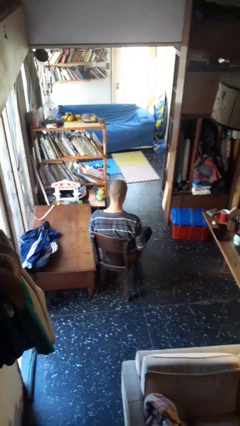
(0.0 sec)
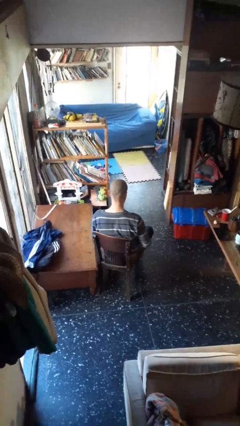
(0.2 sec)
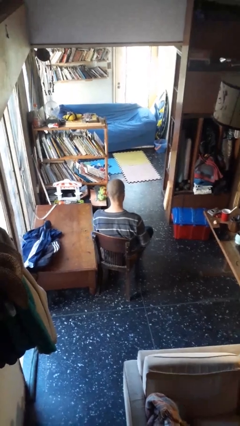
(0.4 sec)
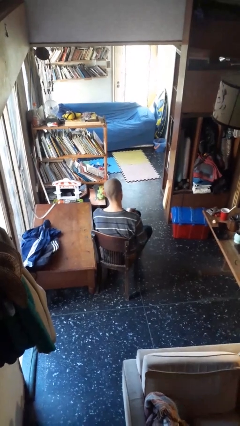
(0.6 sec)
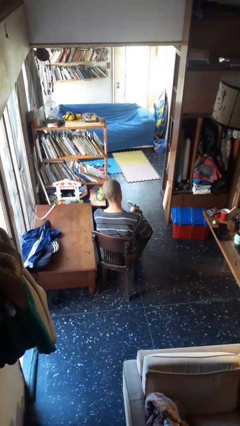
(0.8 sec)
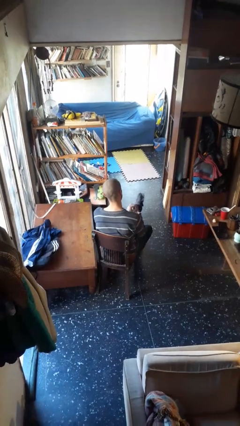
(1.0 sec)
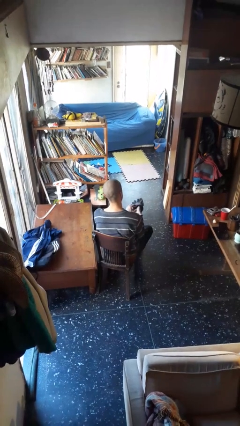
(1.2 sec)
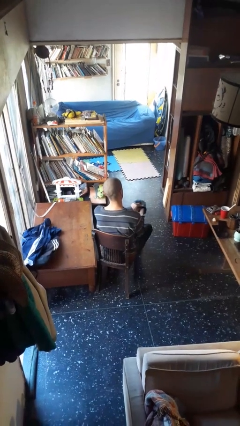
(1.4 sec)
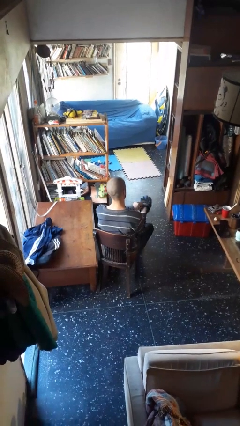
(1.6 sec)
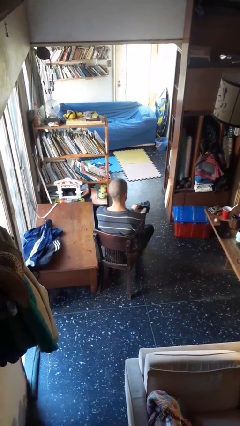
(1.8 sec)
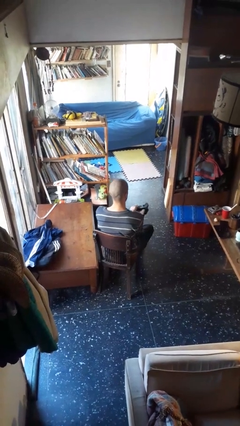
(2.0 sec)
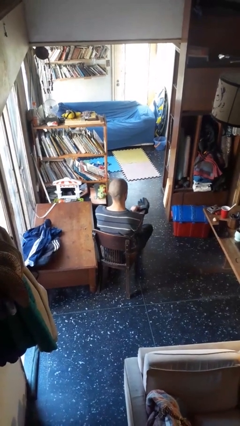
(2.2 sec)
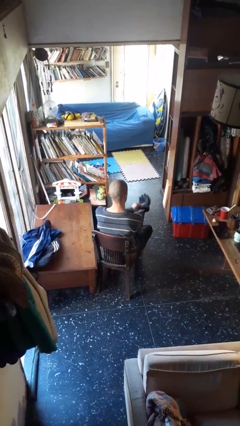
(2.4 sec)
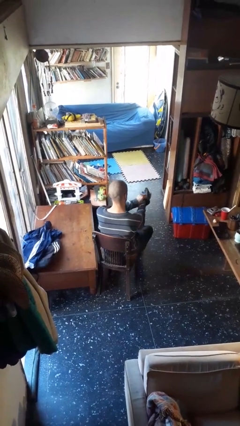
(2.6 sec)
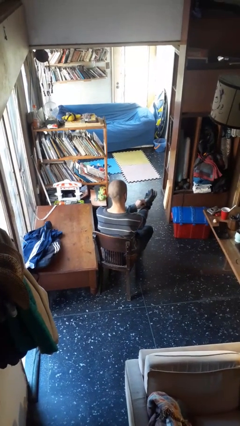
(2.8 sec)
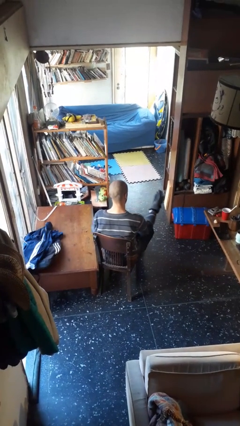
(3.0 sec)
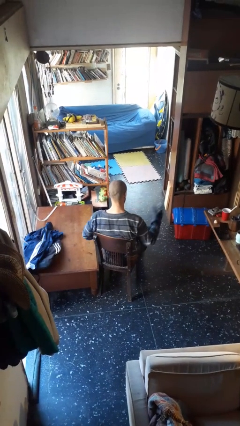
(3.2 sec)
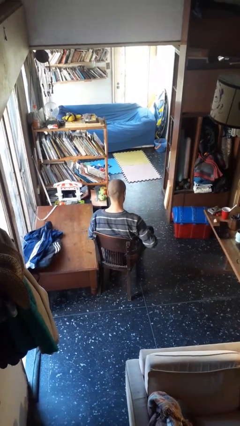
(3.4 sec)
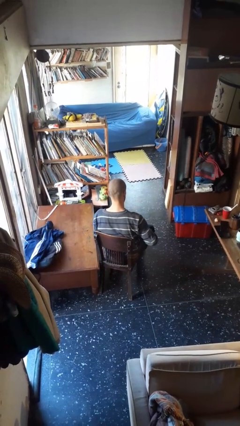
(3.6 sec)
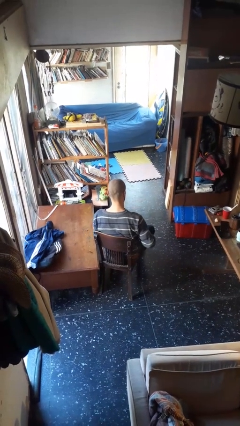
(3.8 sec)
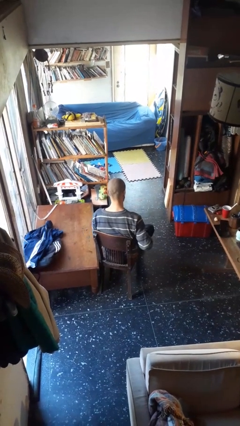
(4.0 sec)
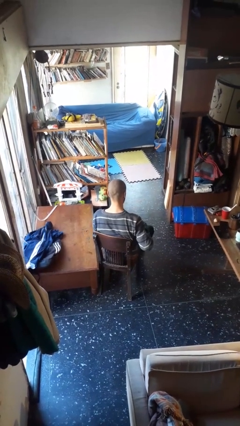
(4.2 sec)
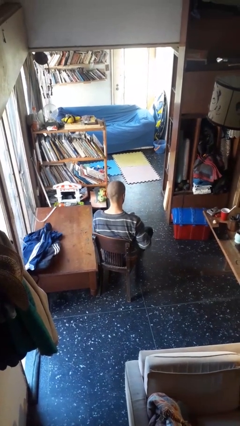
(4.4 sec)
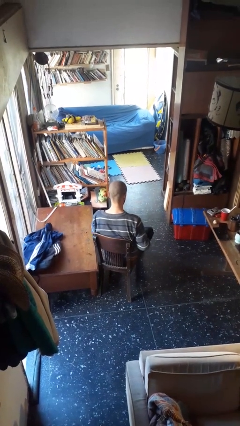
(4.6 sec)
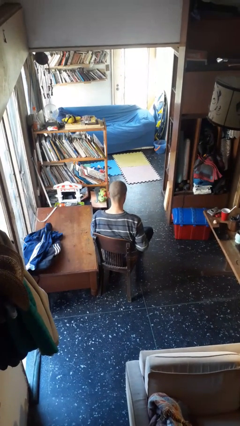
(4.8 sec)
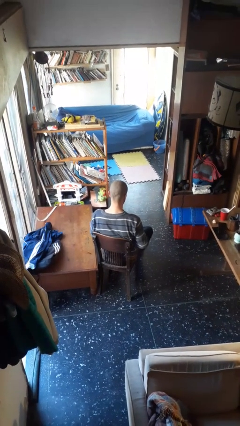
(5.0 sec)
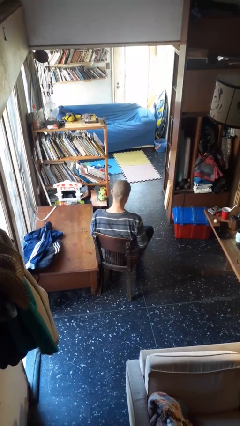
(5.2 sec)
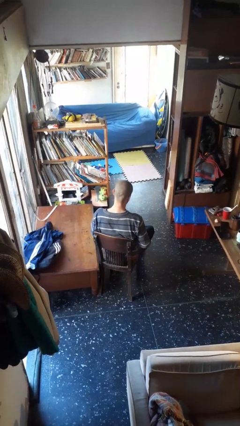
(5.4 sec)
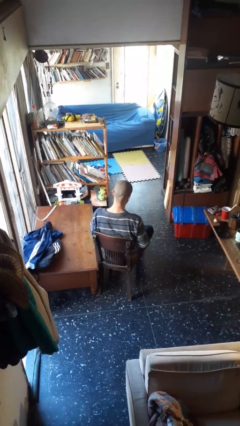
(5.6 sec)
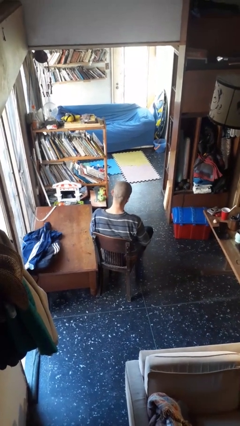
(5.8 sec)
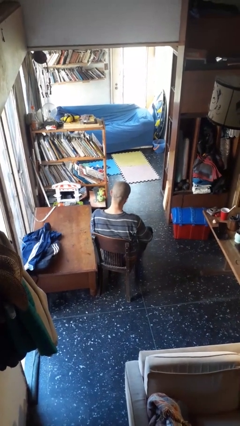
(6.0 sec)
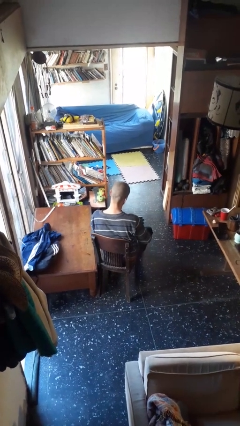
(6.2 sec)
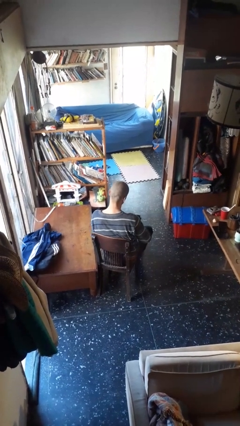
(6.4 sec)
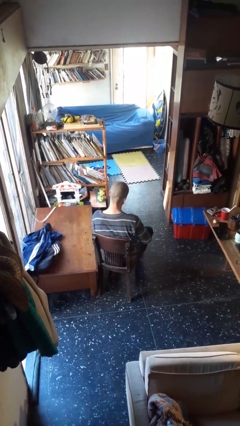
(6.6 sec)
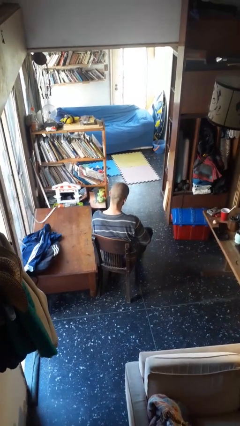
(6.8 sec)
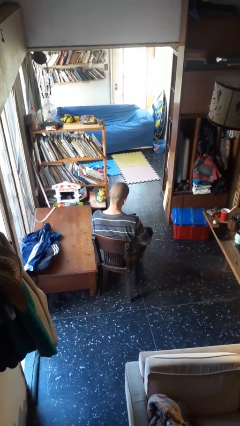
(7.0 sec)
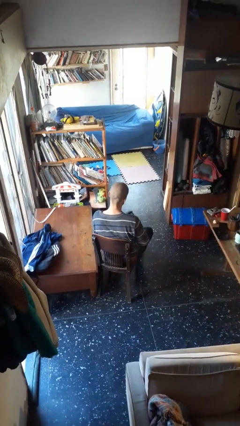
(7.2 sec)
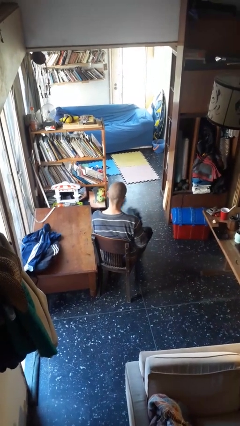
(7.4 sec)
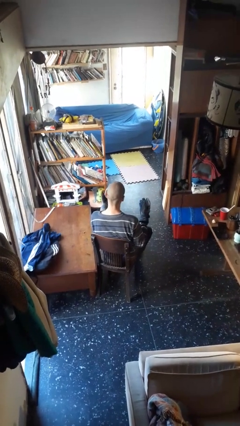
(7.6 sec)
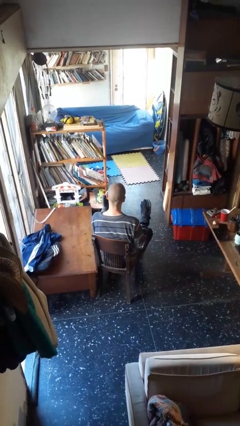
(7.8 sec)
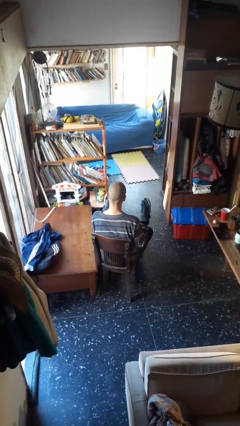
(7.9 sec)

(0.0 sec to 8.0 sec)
person puts on gloves

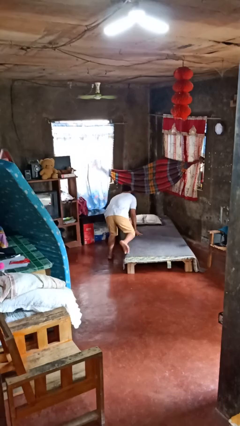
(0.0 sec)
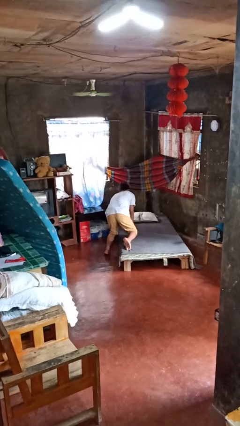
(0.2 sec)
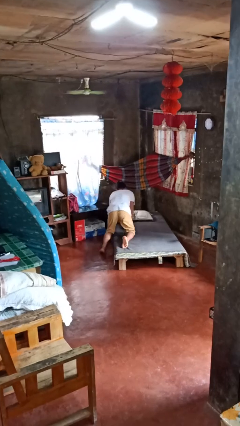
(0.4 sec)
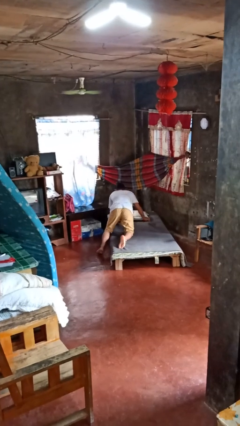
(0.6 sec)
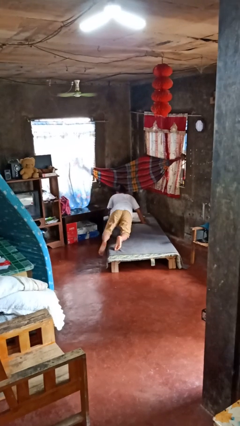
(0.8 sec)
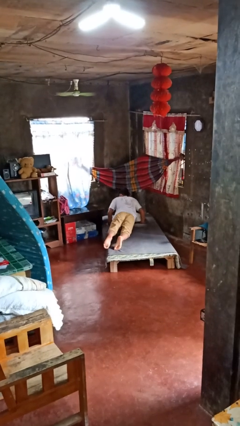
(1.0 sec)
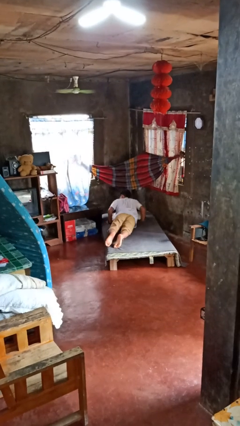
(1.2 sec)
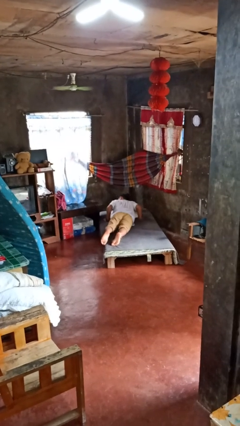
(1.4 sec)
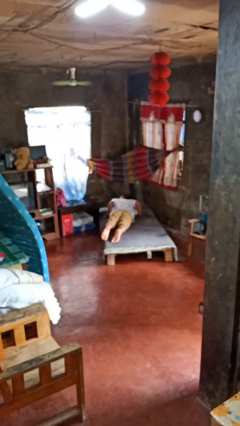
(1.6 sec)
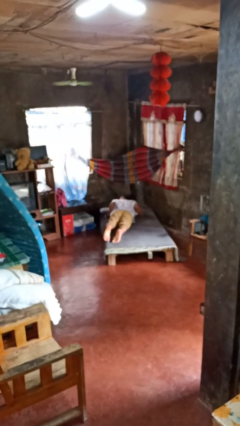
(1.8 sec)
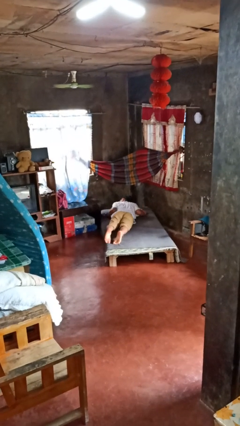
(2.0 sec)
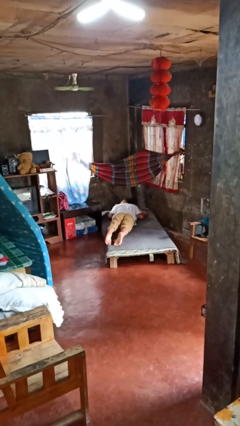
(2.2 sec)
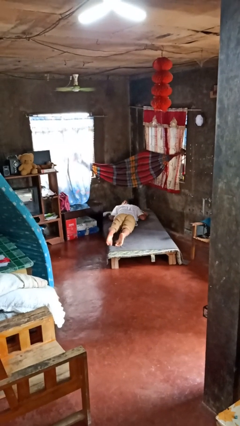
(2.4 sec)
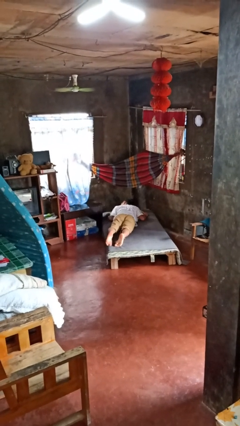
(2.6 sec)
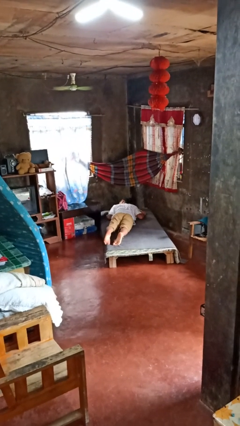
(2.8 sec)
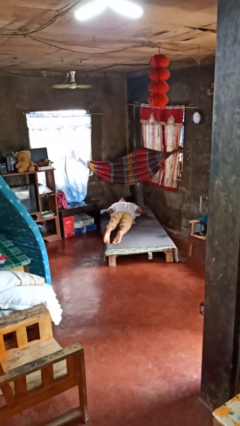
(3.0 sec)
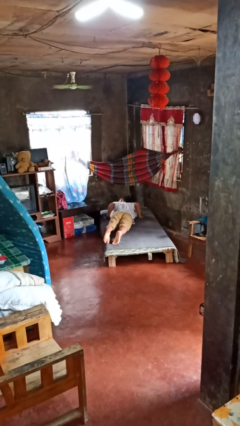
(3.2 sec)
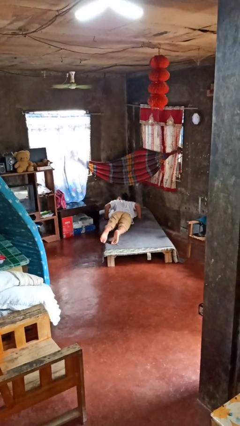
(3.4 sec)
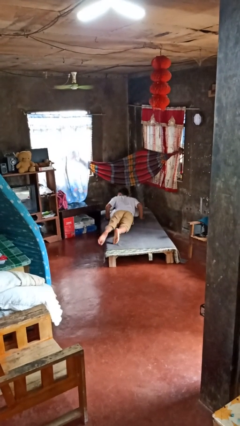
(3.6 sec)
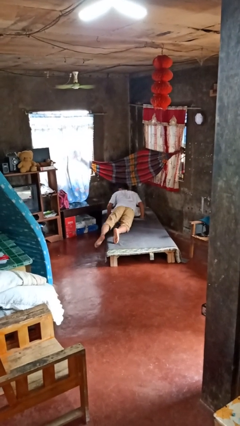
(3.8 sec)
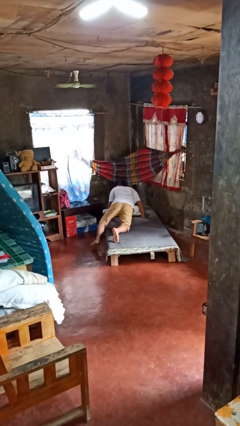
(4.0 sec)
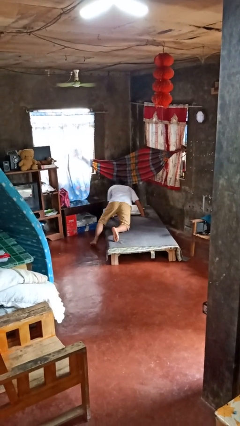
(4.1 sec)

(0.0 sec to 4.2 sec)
person lies down on bed

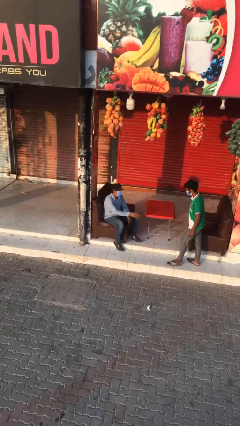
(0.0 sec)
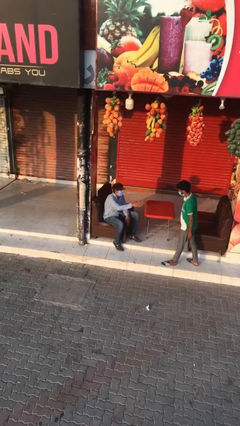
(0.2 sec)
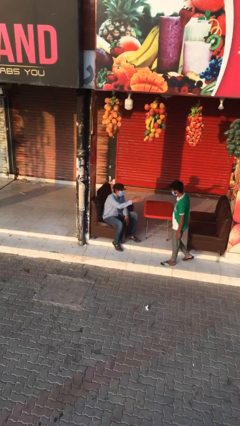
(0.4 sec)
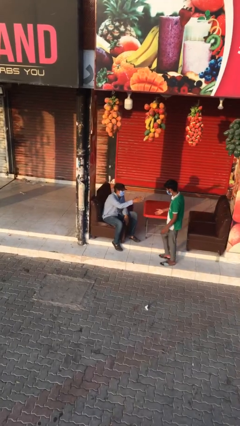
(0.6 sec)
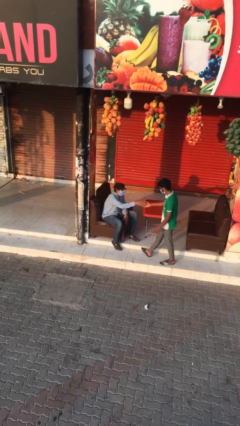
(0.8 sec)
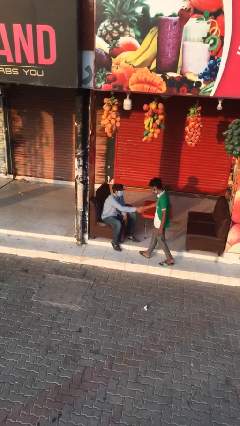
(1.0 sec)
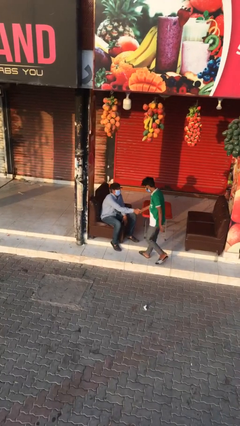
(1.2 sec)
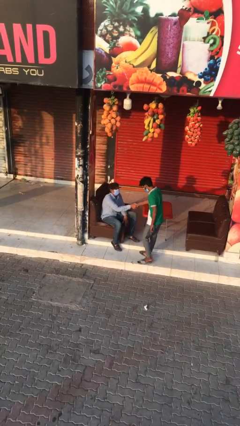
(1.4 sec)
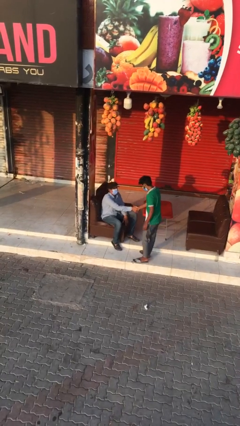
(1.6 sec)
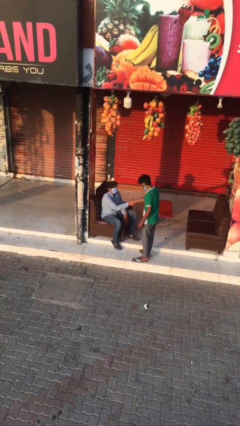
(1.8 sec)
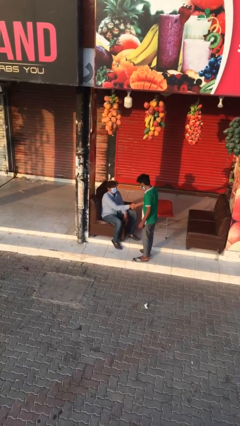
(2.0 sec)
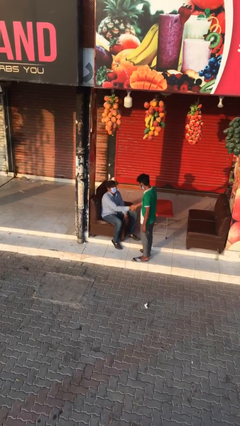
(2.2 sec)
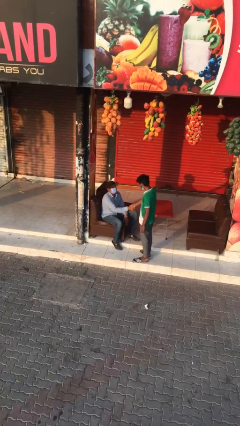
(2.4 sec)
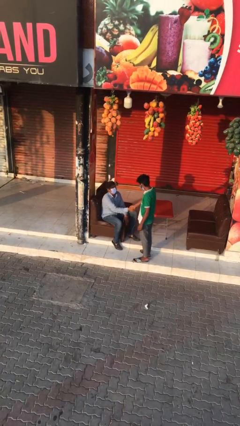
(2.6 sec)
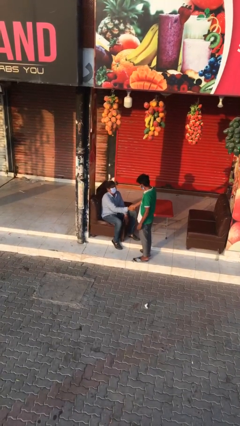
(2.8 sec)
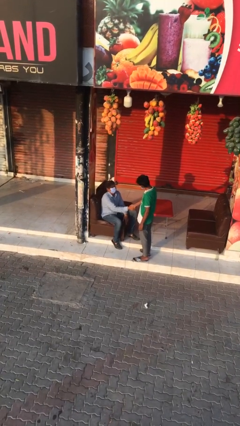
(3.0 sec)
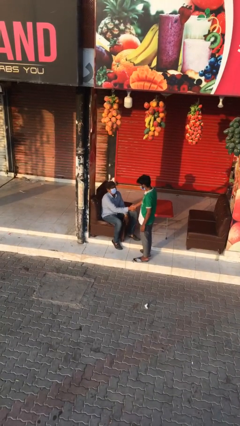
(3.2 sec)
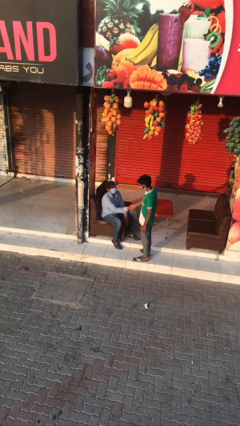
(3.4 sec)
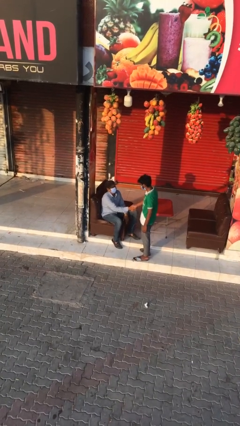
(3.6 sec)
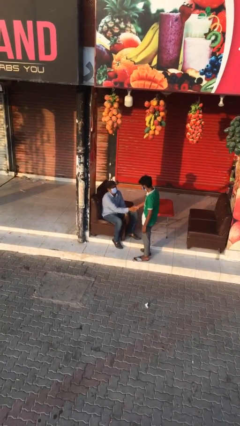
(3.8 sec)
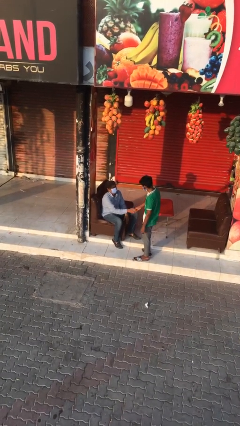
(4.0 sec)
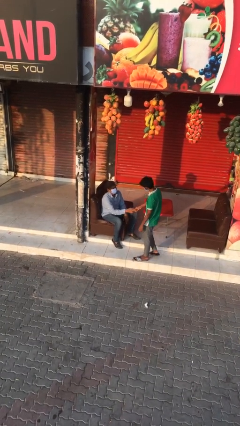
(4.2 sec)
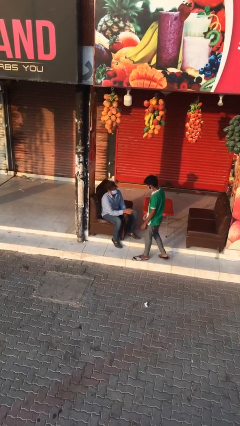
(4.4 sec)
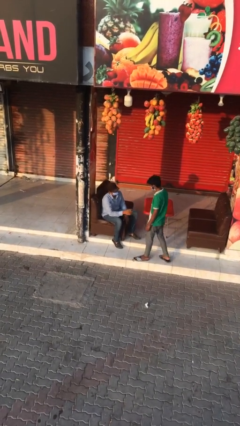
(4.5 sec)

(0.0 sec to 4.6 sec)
person shakes hand

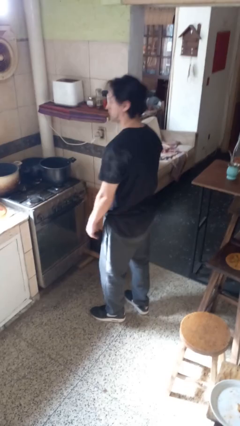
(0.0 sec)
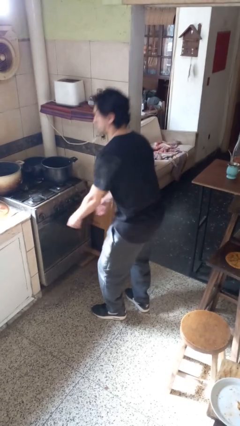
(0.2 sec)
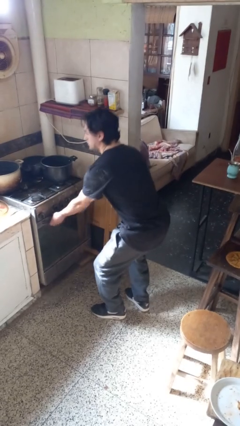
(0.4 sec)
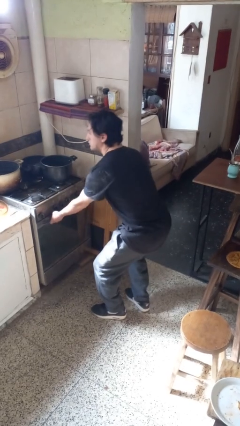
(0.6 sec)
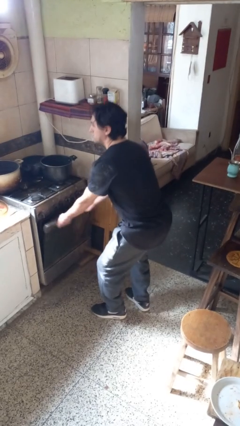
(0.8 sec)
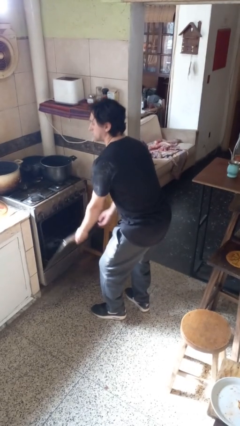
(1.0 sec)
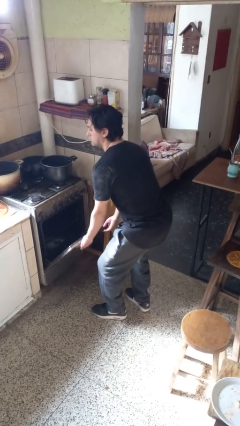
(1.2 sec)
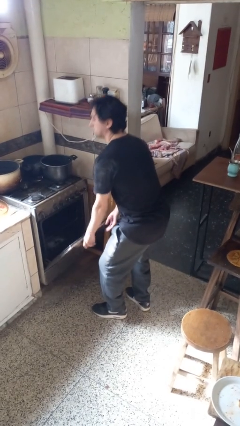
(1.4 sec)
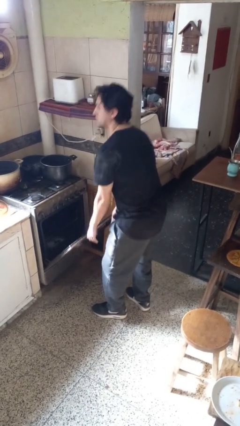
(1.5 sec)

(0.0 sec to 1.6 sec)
person opens oven door
